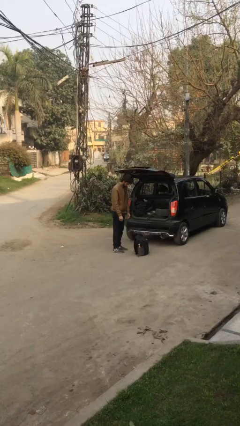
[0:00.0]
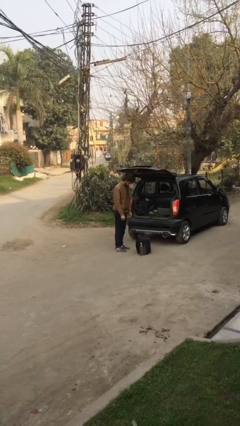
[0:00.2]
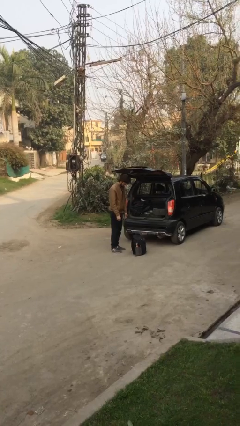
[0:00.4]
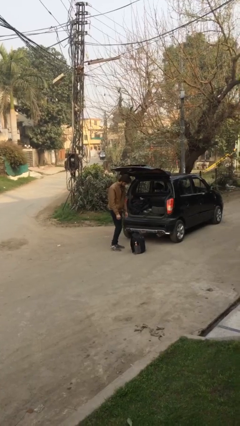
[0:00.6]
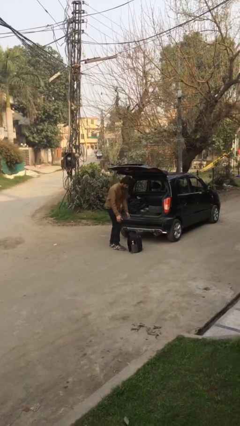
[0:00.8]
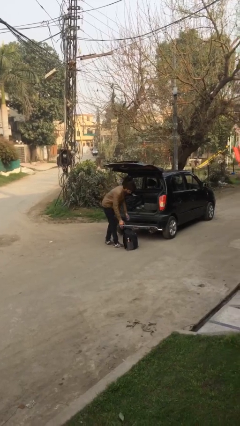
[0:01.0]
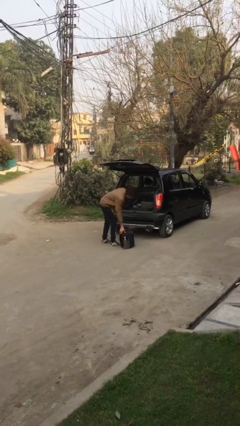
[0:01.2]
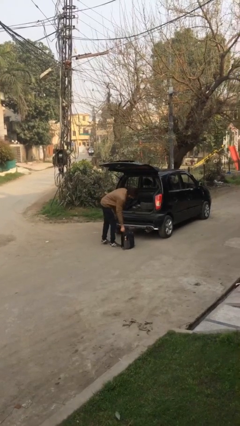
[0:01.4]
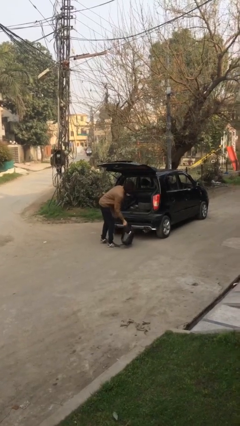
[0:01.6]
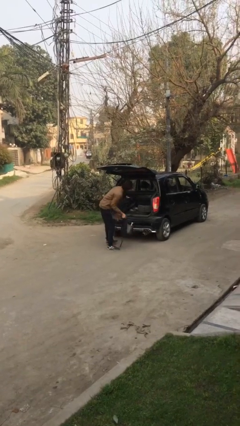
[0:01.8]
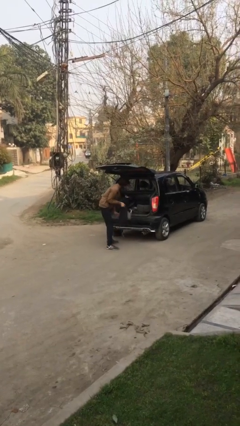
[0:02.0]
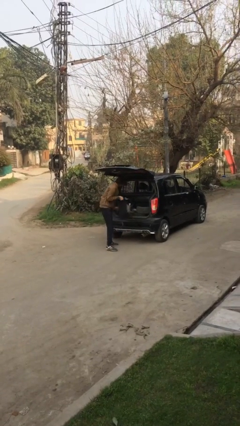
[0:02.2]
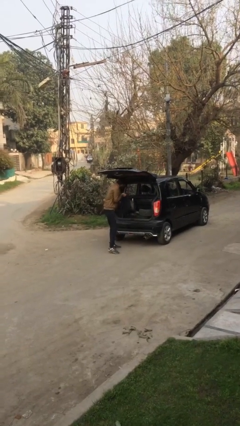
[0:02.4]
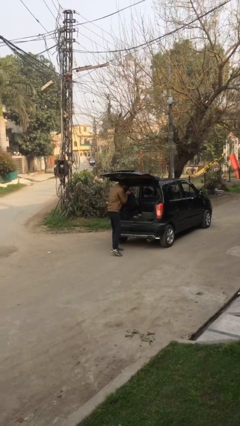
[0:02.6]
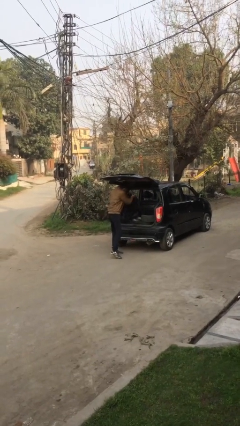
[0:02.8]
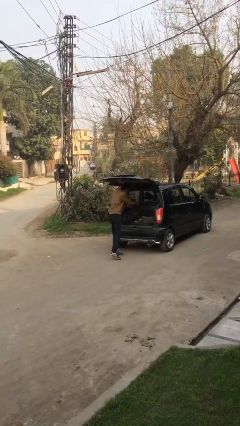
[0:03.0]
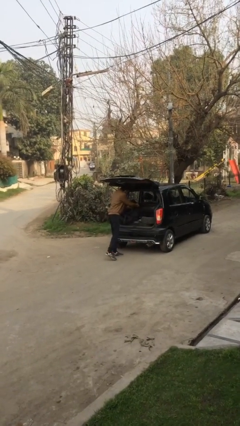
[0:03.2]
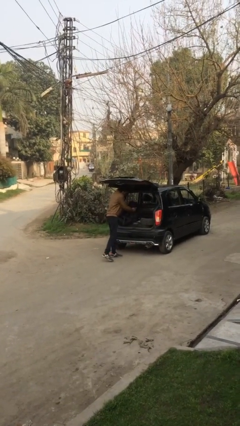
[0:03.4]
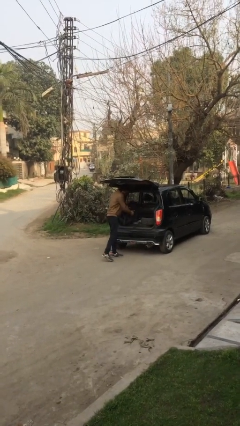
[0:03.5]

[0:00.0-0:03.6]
person loads car

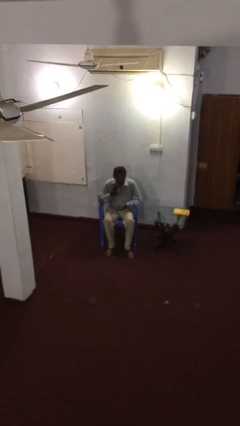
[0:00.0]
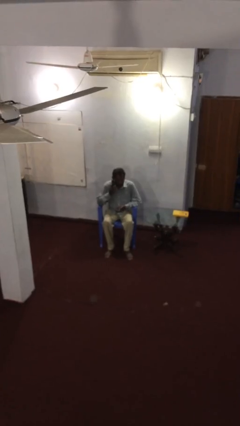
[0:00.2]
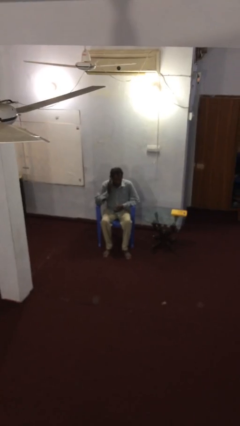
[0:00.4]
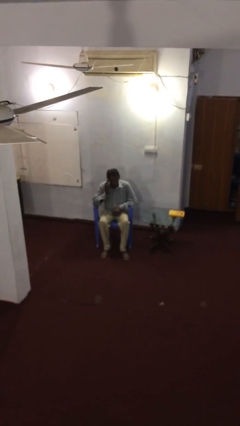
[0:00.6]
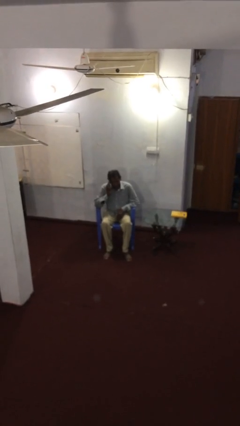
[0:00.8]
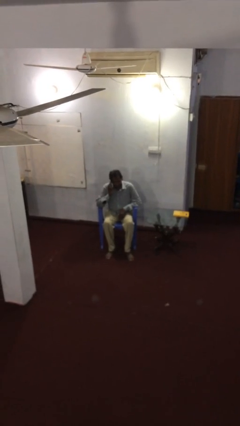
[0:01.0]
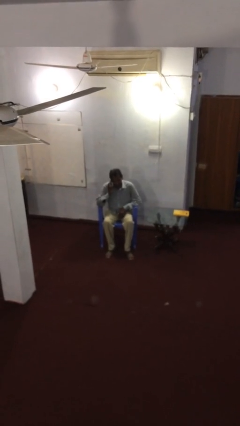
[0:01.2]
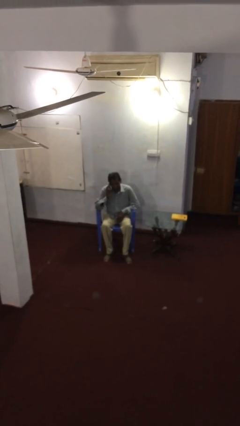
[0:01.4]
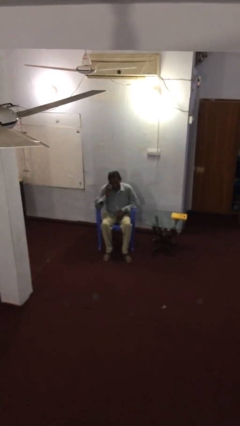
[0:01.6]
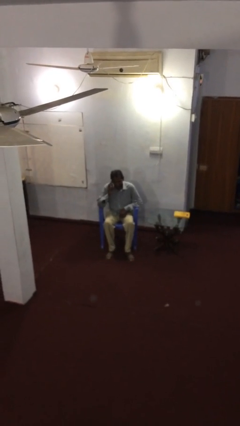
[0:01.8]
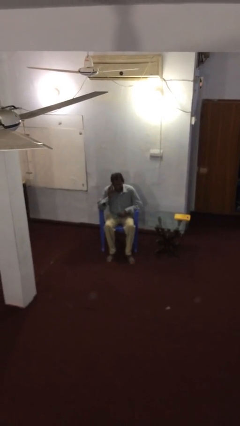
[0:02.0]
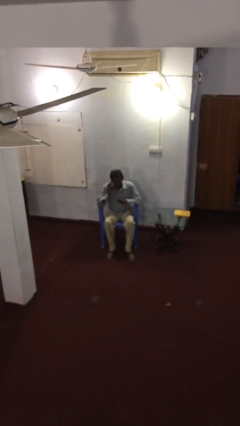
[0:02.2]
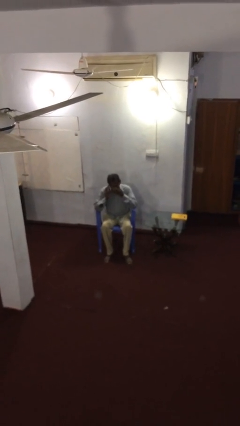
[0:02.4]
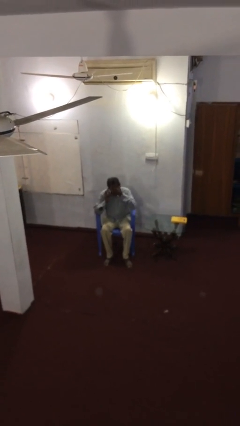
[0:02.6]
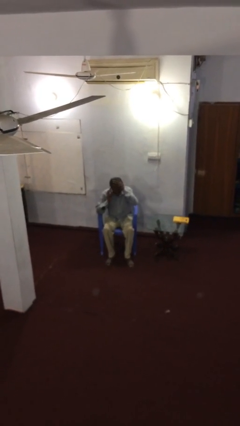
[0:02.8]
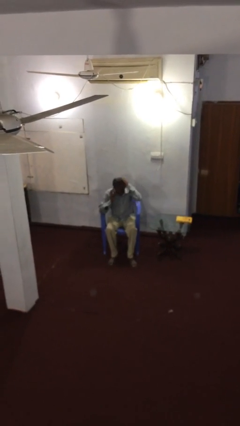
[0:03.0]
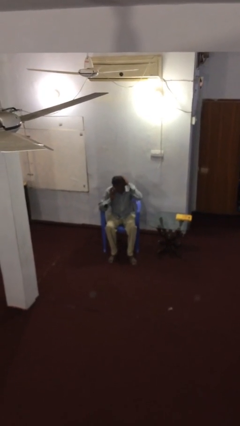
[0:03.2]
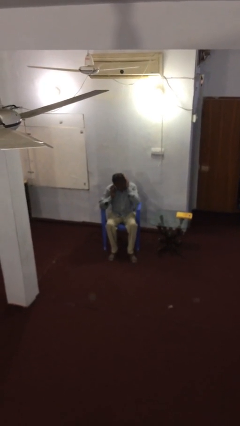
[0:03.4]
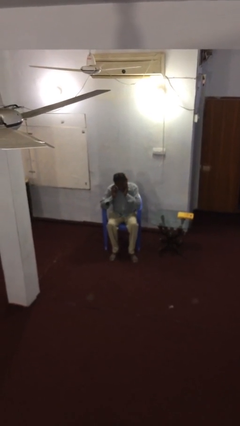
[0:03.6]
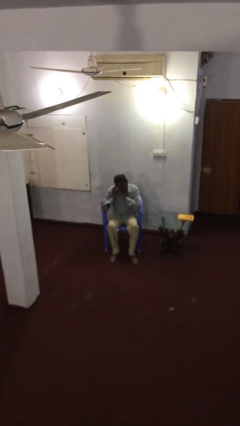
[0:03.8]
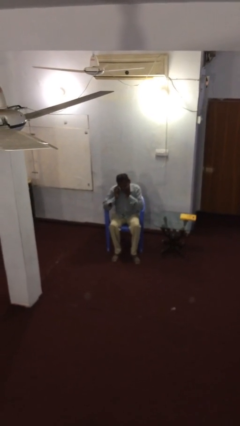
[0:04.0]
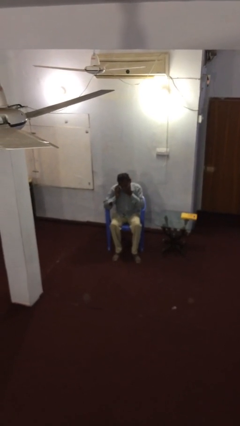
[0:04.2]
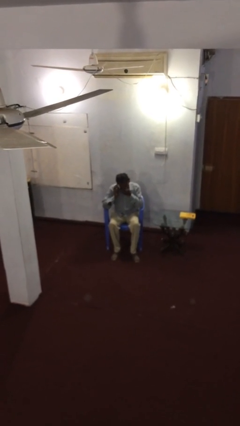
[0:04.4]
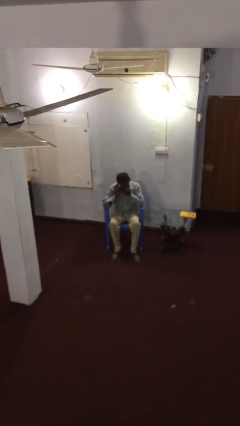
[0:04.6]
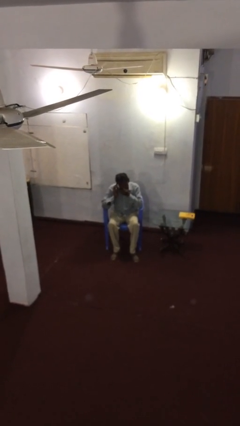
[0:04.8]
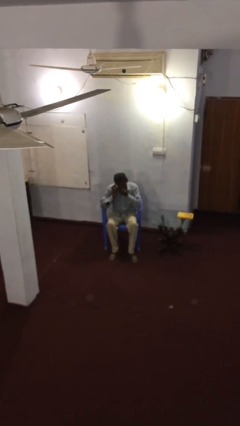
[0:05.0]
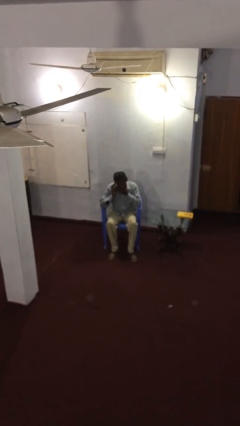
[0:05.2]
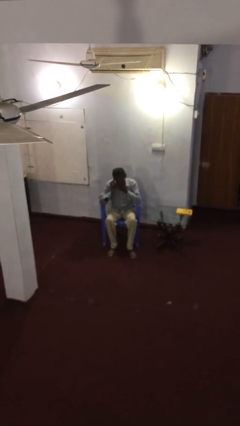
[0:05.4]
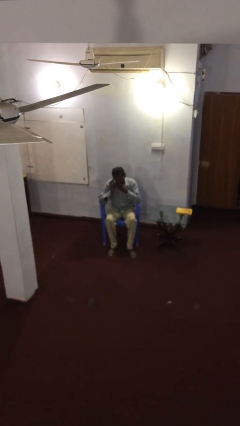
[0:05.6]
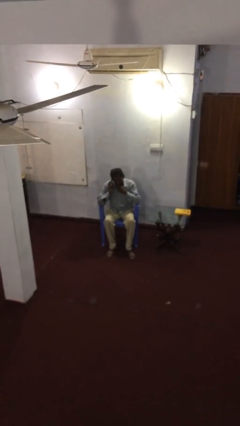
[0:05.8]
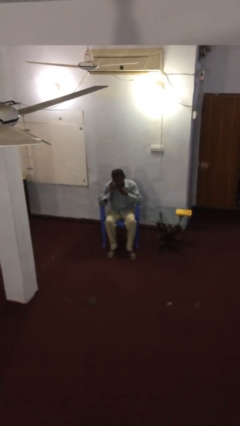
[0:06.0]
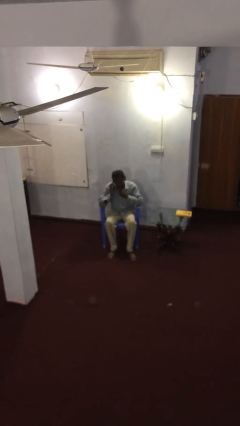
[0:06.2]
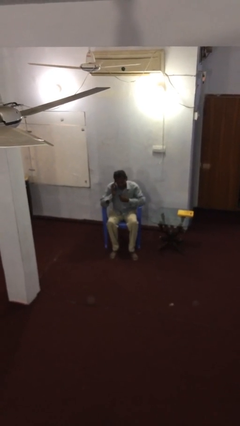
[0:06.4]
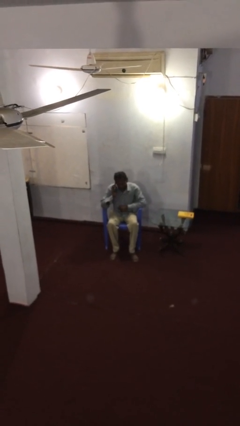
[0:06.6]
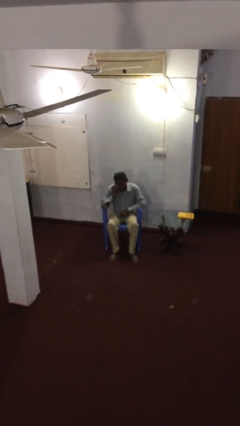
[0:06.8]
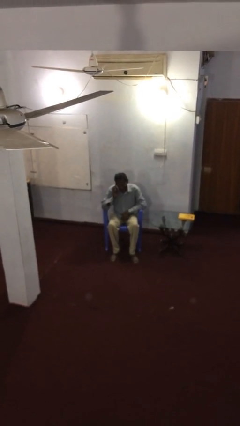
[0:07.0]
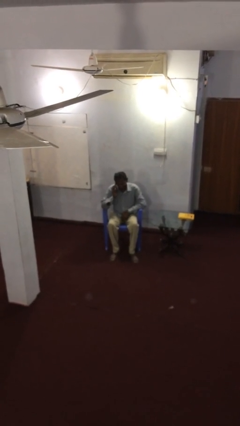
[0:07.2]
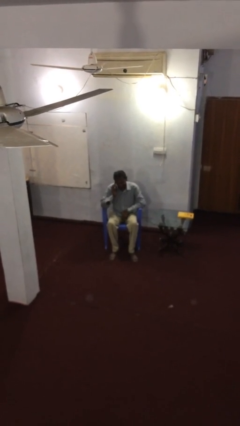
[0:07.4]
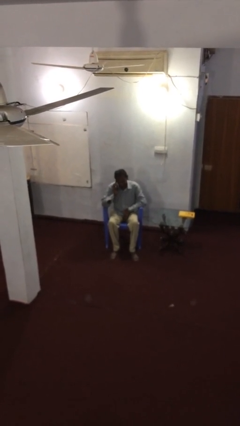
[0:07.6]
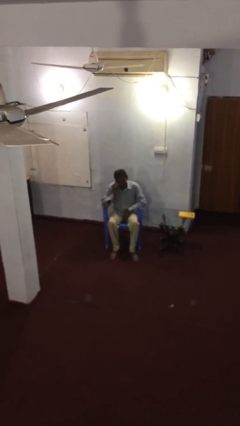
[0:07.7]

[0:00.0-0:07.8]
person talks on phone

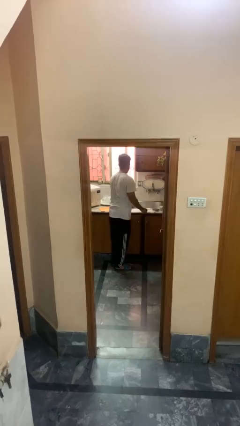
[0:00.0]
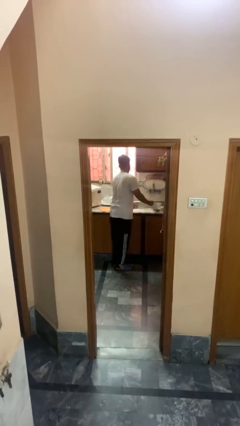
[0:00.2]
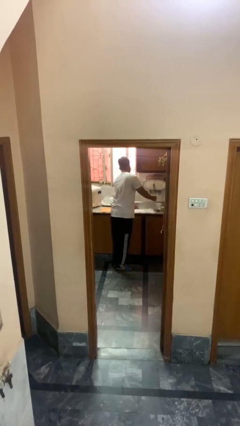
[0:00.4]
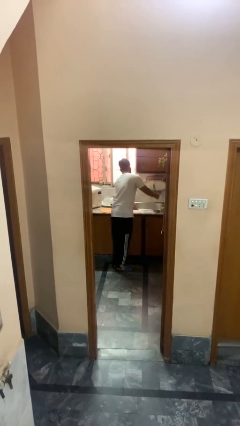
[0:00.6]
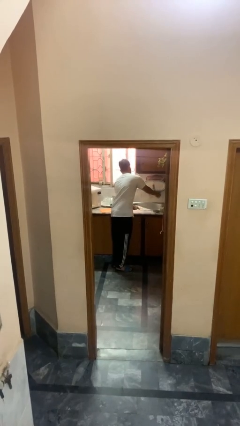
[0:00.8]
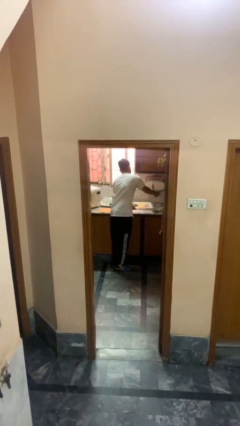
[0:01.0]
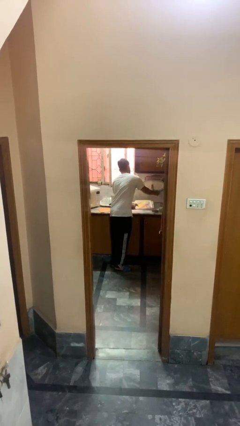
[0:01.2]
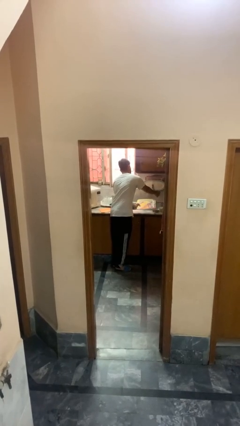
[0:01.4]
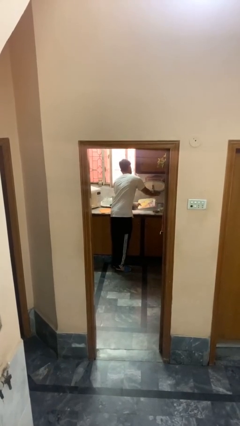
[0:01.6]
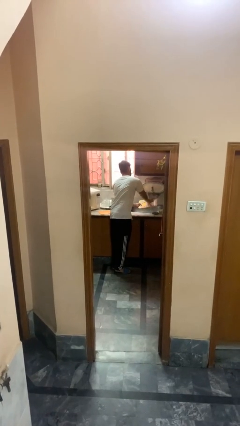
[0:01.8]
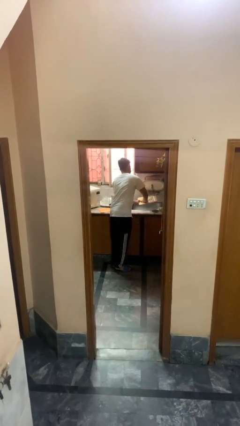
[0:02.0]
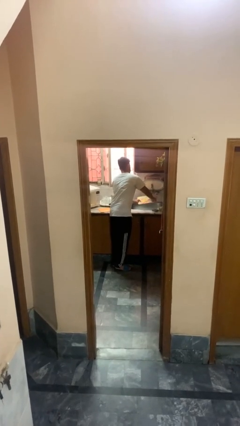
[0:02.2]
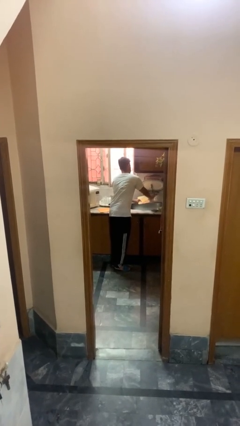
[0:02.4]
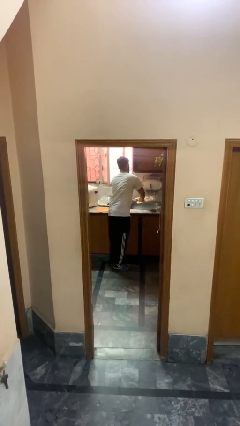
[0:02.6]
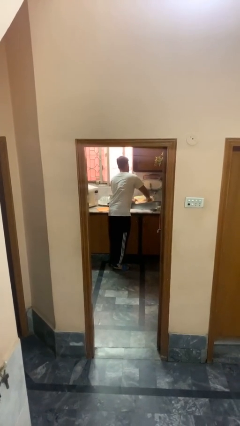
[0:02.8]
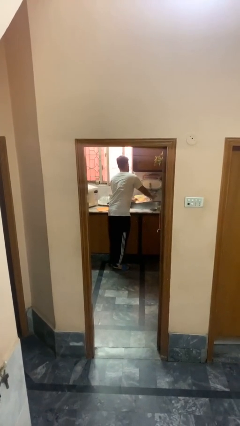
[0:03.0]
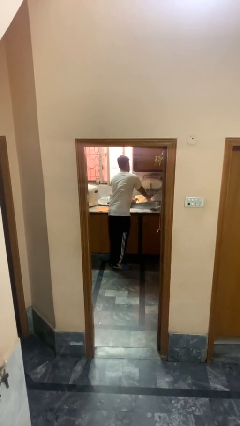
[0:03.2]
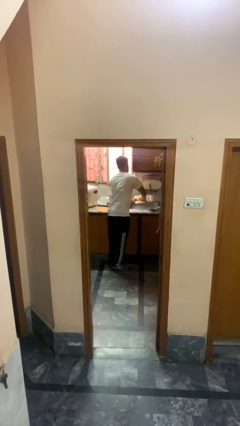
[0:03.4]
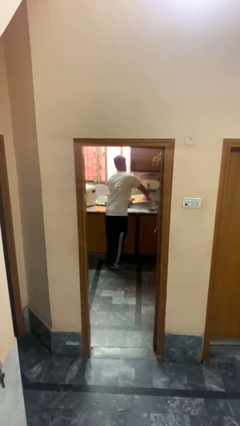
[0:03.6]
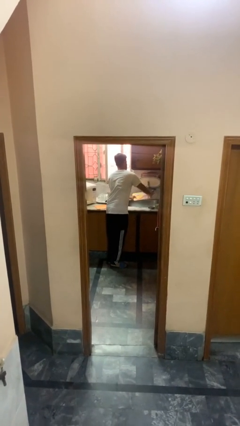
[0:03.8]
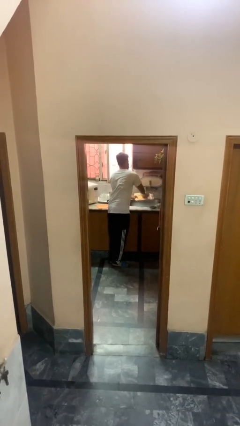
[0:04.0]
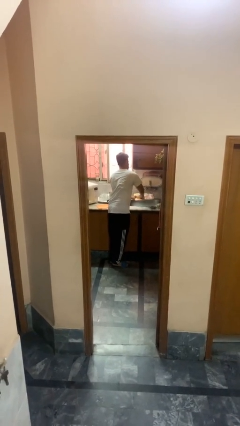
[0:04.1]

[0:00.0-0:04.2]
person washes dish

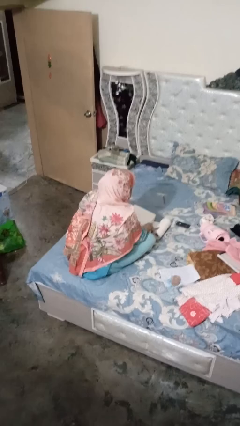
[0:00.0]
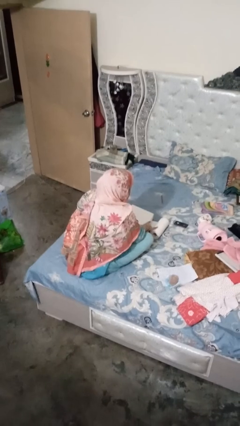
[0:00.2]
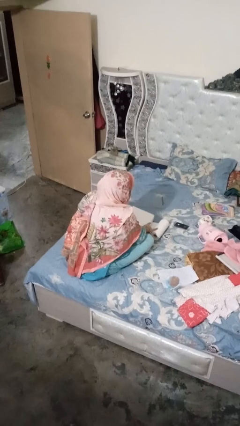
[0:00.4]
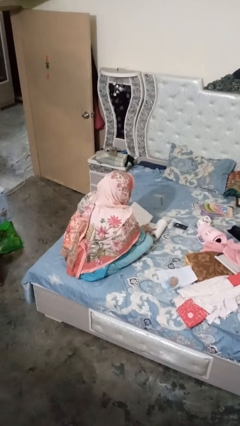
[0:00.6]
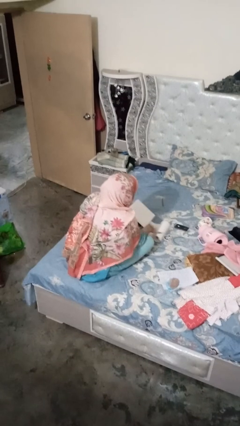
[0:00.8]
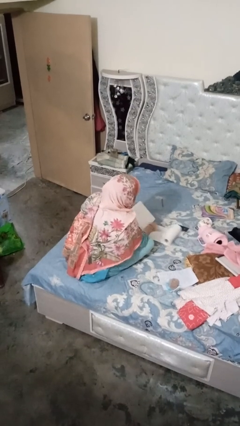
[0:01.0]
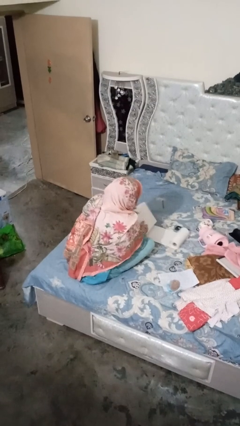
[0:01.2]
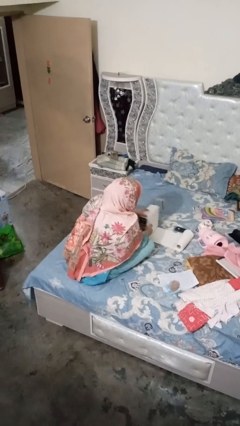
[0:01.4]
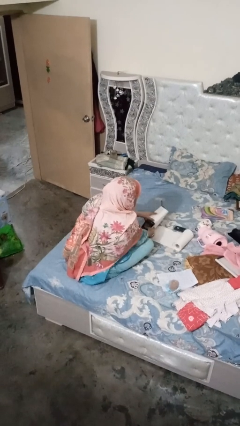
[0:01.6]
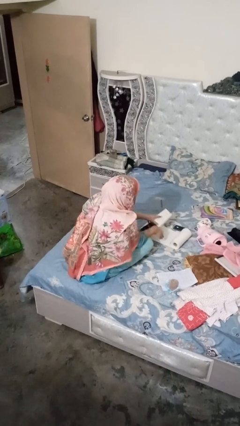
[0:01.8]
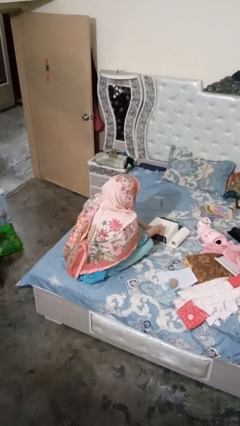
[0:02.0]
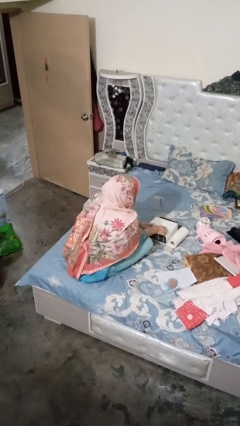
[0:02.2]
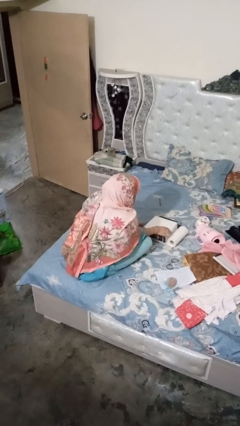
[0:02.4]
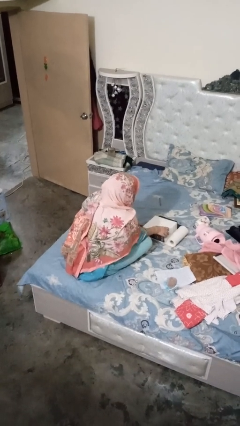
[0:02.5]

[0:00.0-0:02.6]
person wraps box
